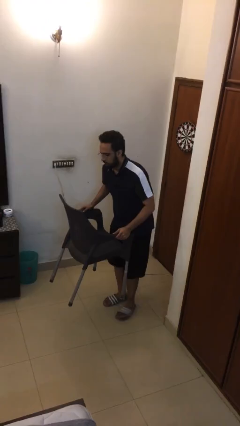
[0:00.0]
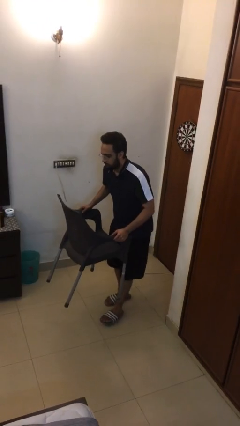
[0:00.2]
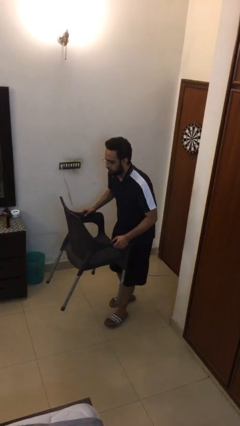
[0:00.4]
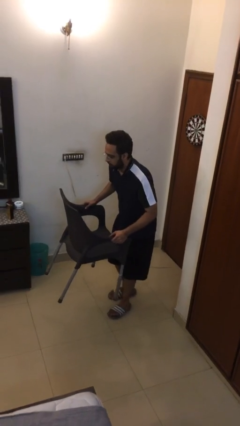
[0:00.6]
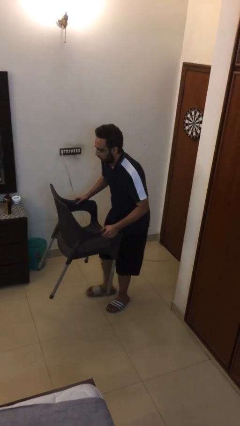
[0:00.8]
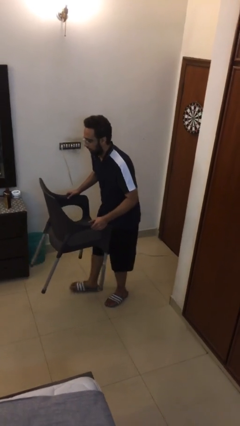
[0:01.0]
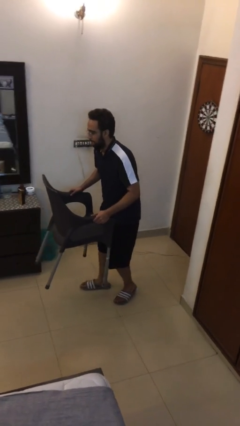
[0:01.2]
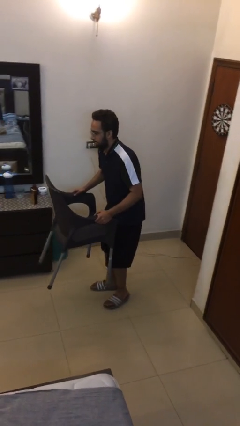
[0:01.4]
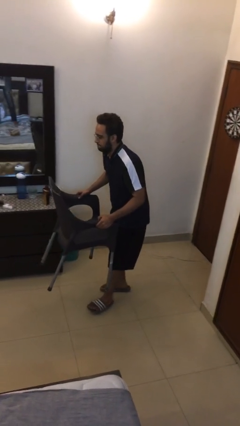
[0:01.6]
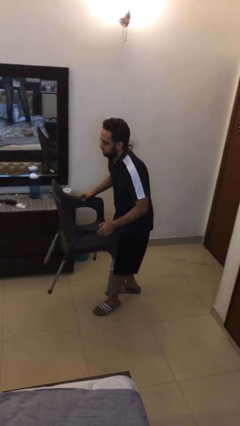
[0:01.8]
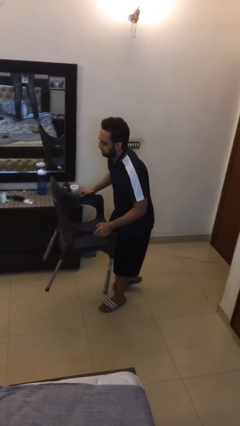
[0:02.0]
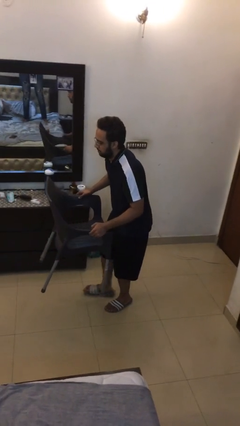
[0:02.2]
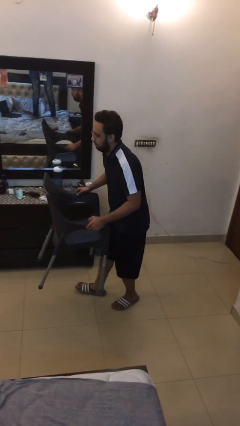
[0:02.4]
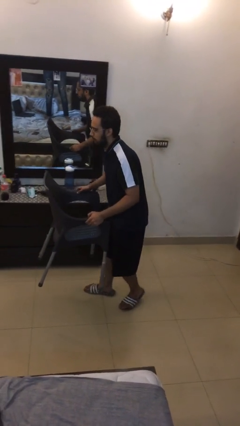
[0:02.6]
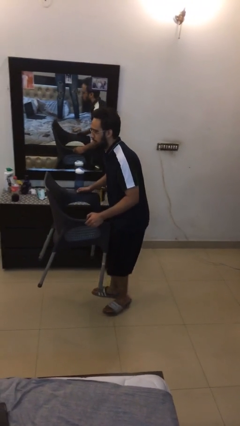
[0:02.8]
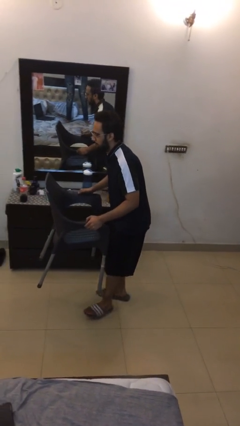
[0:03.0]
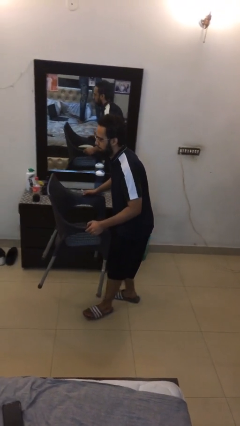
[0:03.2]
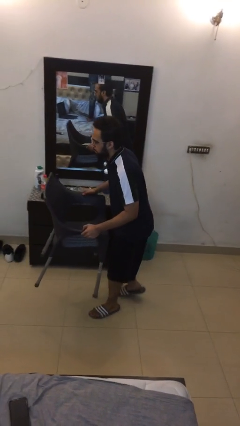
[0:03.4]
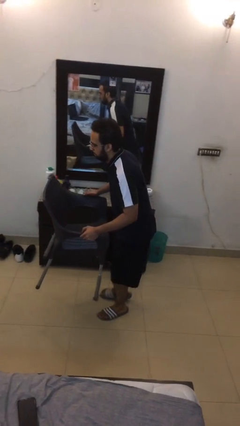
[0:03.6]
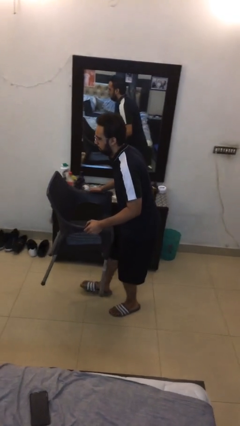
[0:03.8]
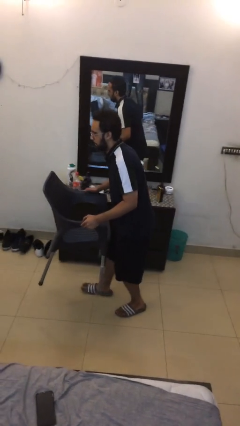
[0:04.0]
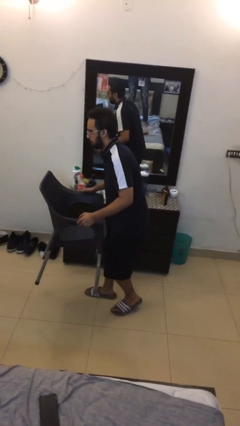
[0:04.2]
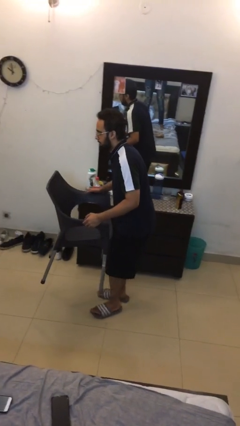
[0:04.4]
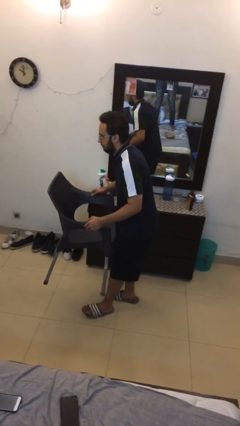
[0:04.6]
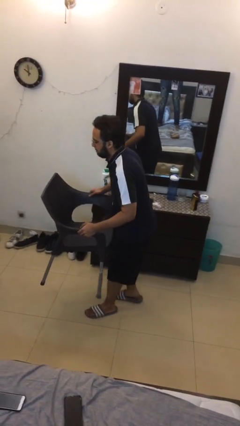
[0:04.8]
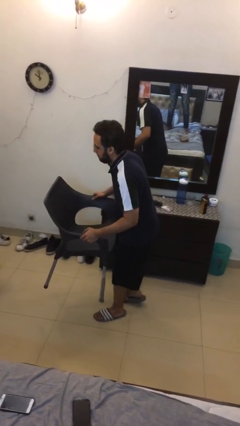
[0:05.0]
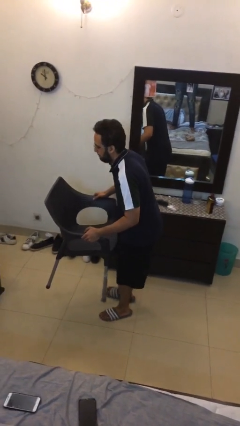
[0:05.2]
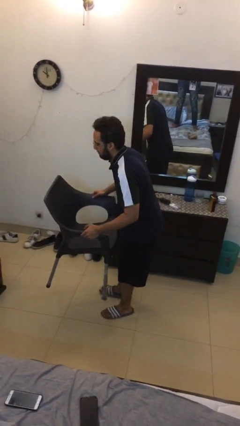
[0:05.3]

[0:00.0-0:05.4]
person carries heavy object

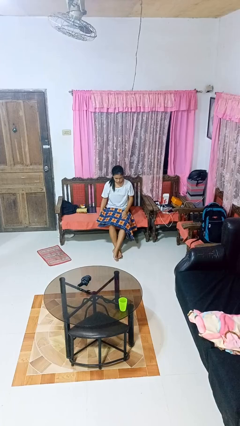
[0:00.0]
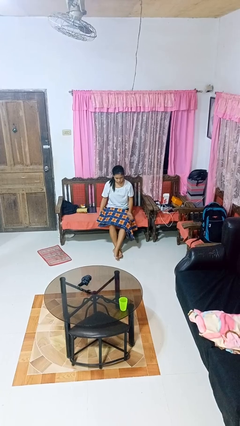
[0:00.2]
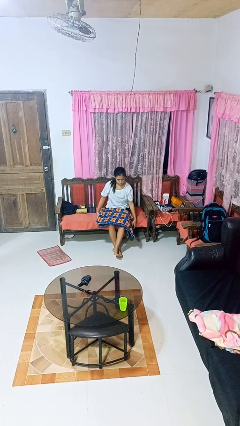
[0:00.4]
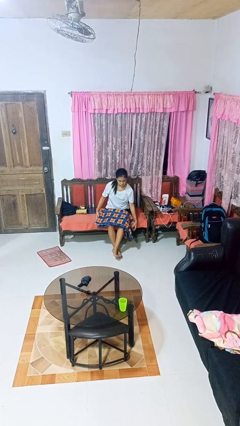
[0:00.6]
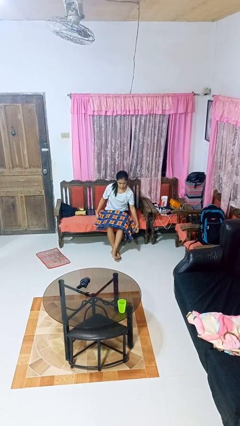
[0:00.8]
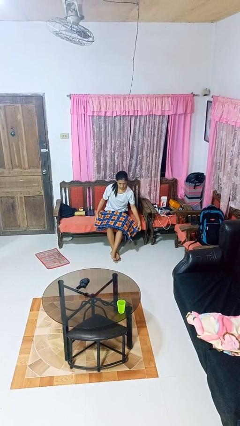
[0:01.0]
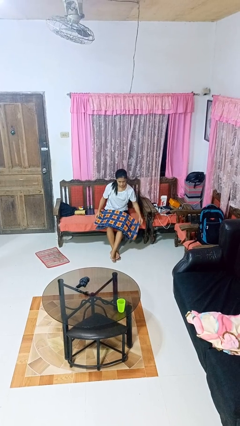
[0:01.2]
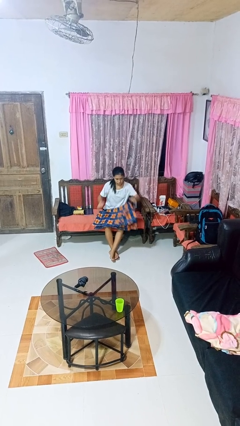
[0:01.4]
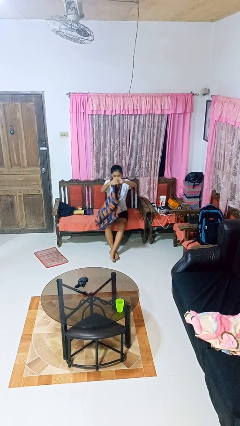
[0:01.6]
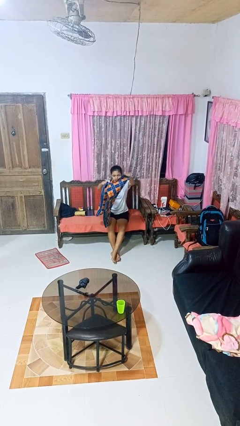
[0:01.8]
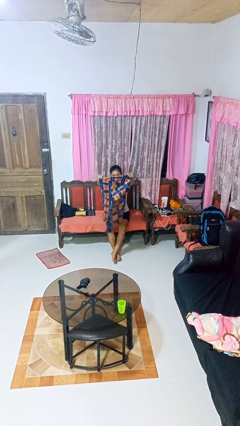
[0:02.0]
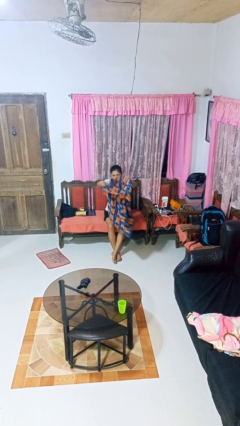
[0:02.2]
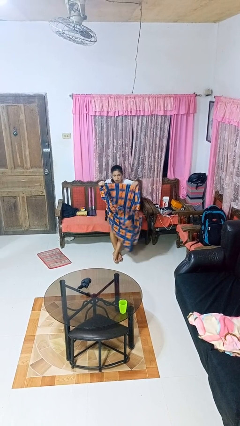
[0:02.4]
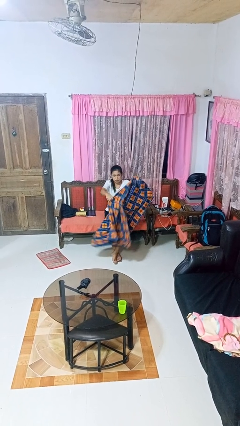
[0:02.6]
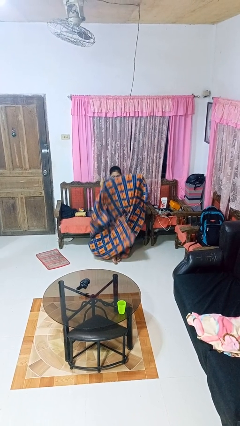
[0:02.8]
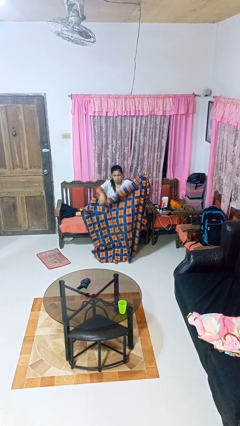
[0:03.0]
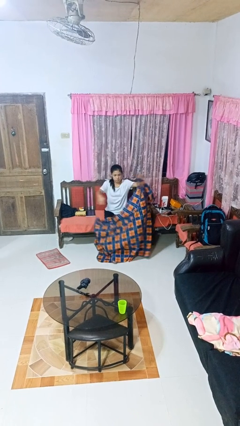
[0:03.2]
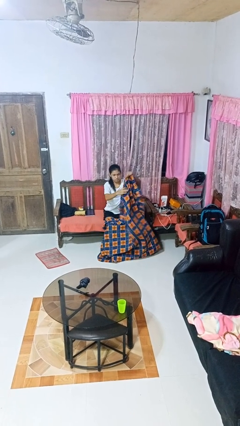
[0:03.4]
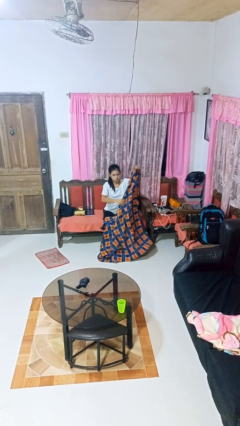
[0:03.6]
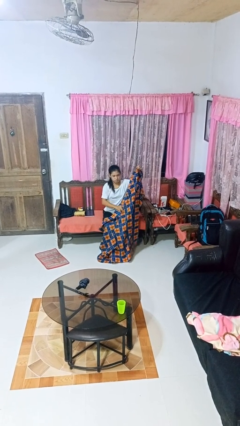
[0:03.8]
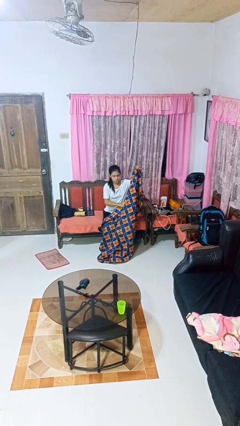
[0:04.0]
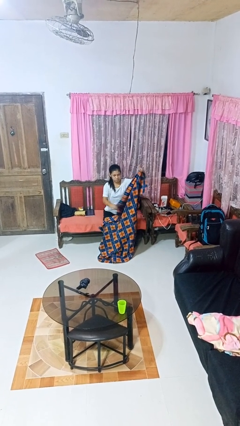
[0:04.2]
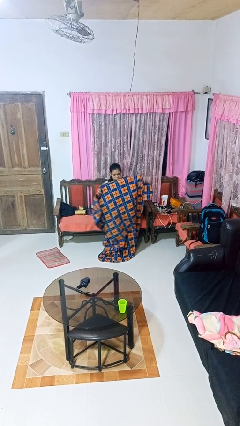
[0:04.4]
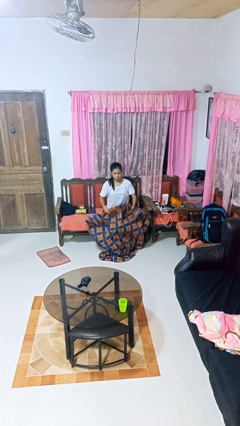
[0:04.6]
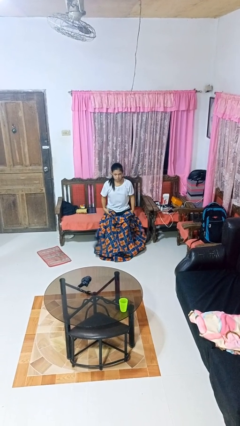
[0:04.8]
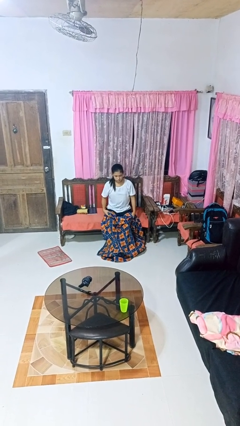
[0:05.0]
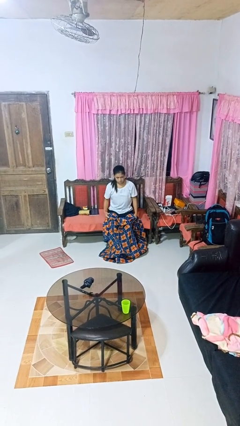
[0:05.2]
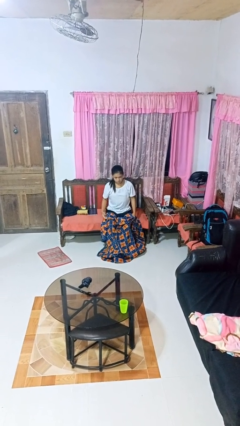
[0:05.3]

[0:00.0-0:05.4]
person unfolds blanket

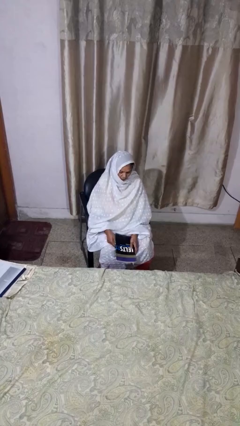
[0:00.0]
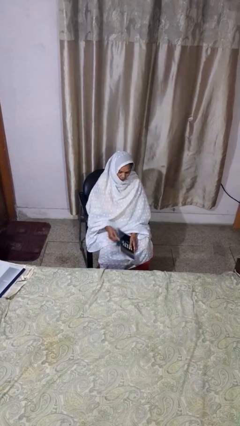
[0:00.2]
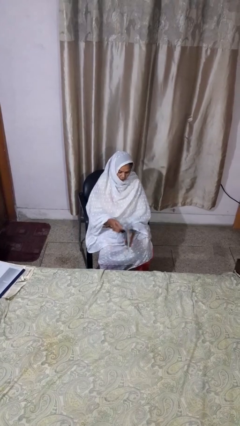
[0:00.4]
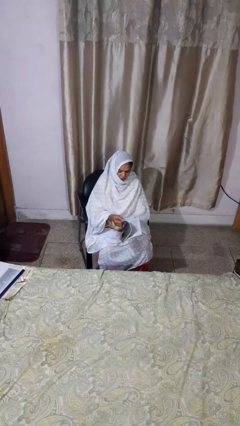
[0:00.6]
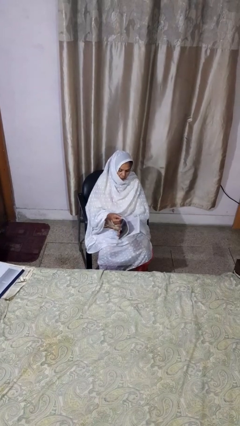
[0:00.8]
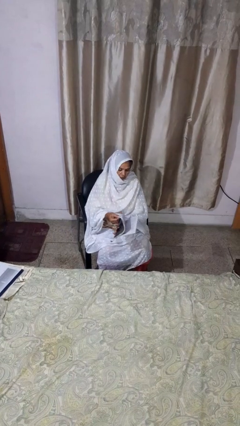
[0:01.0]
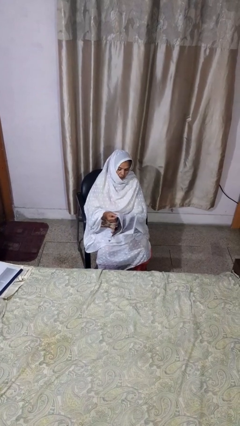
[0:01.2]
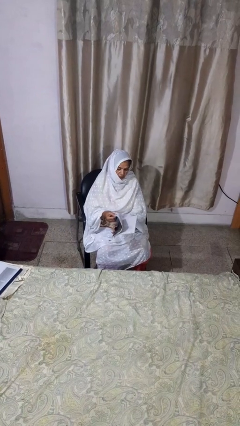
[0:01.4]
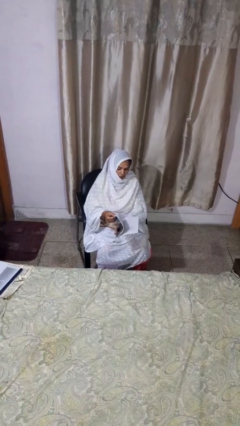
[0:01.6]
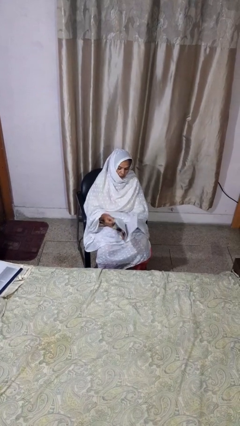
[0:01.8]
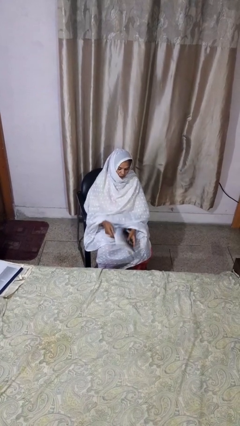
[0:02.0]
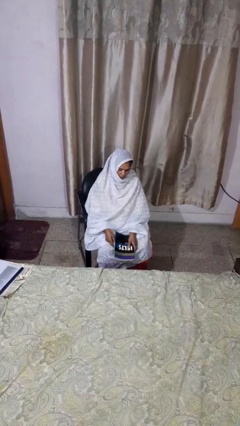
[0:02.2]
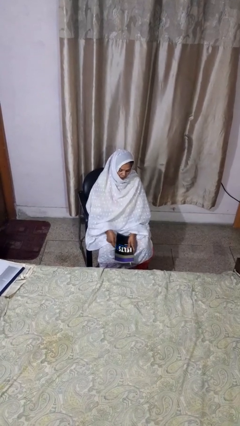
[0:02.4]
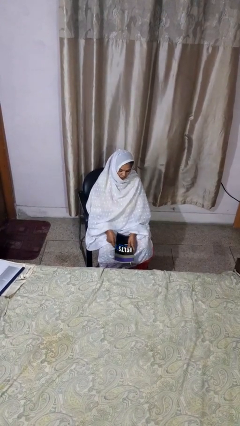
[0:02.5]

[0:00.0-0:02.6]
person reads book

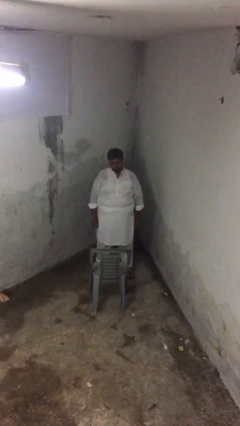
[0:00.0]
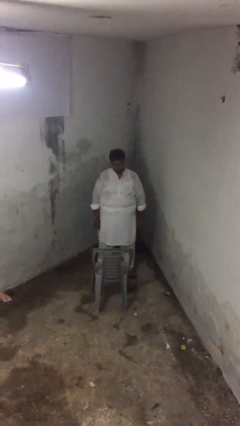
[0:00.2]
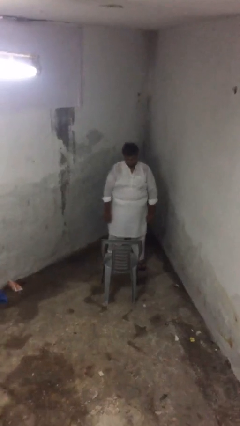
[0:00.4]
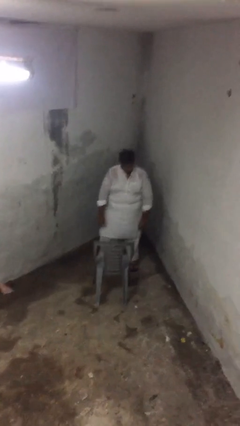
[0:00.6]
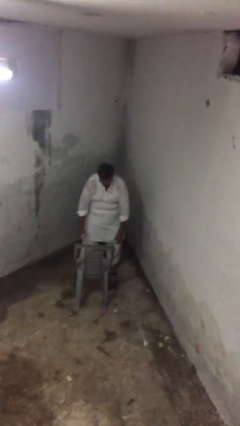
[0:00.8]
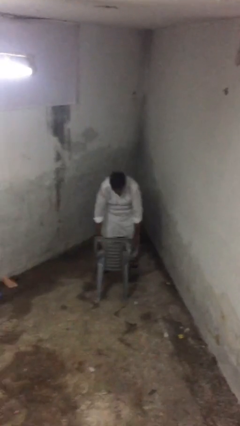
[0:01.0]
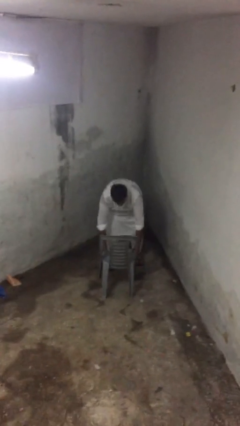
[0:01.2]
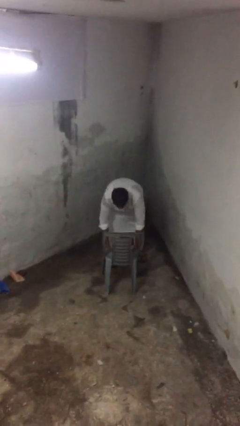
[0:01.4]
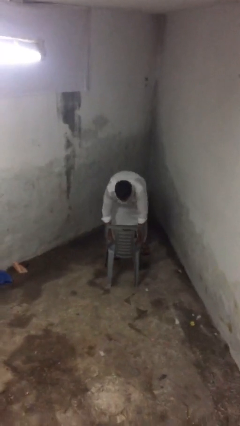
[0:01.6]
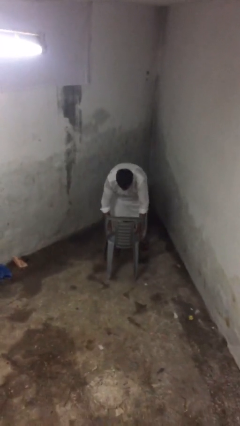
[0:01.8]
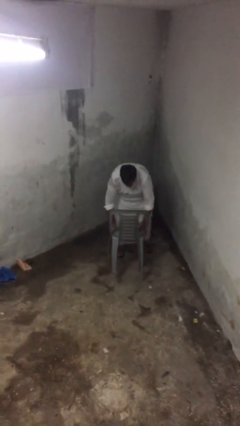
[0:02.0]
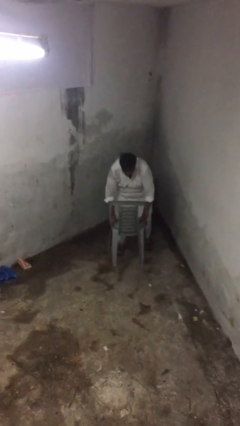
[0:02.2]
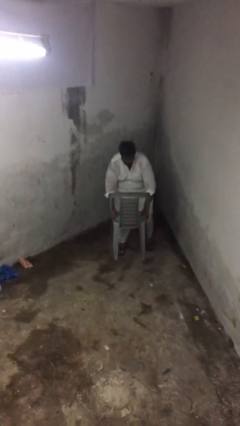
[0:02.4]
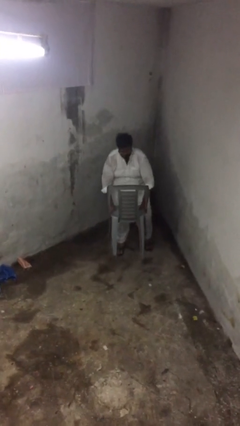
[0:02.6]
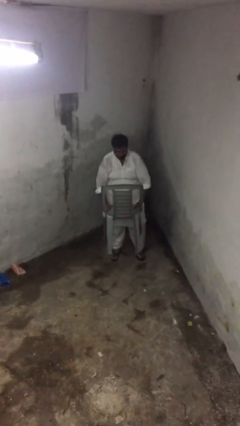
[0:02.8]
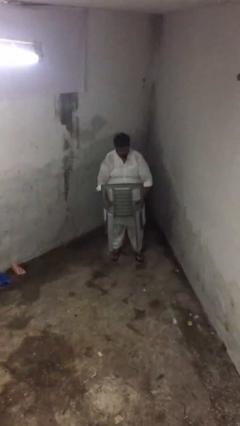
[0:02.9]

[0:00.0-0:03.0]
person picks up object from floor

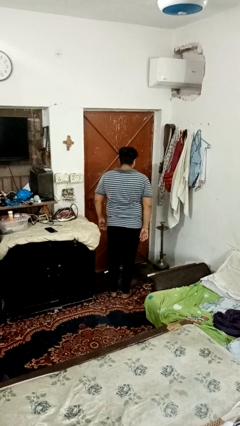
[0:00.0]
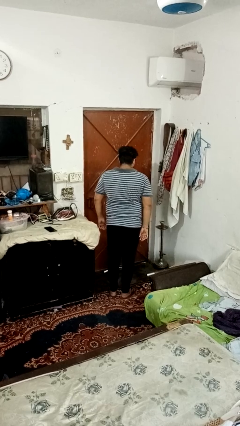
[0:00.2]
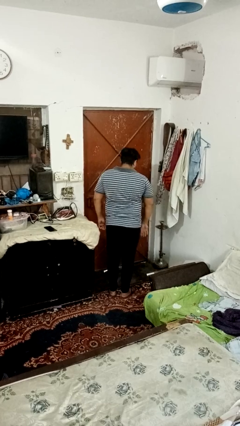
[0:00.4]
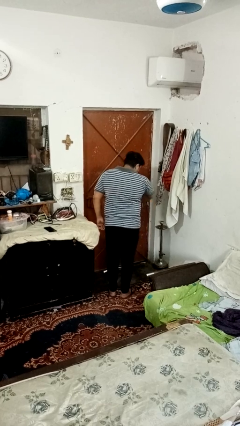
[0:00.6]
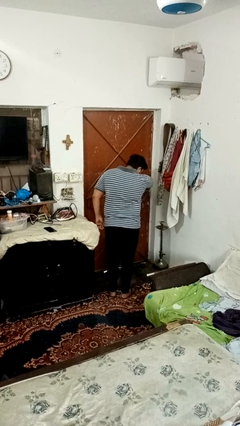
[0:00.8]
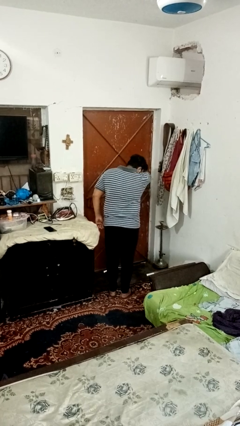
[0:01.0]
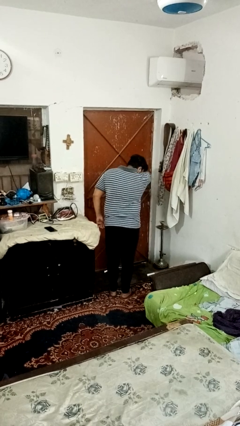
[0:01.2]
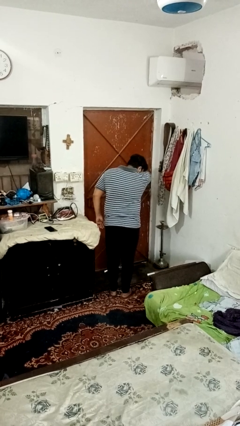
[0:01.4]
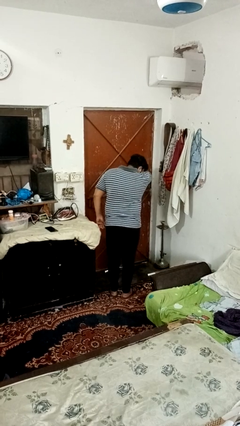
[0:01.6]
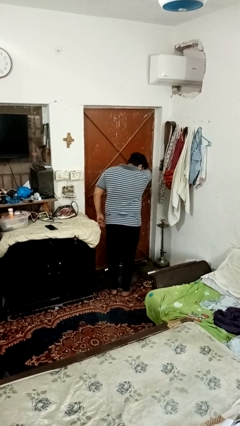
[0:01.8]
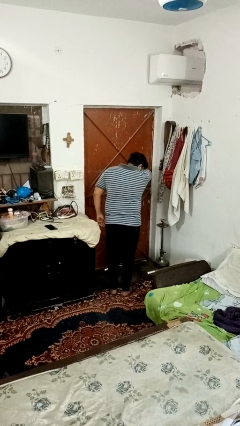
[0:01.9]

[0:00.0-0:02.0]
person sneezes into arm
